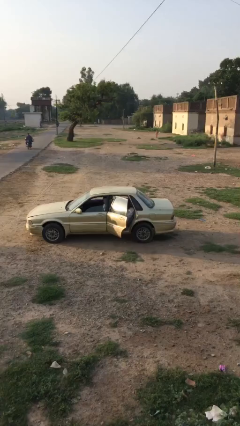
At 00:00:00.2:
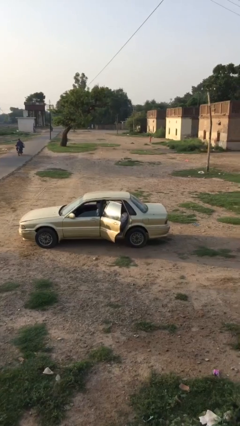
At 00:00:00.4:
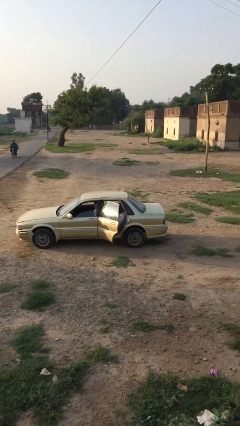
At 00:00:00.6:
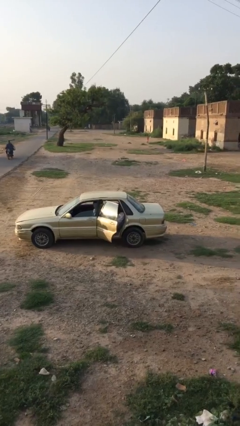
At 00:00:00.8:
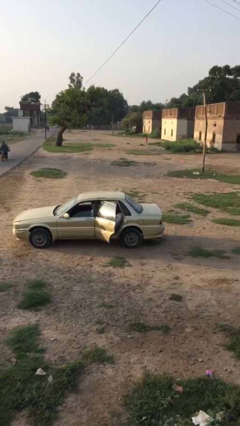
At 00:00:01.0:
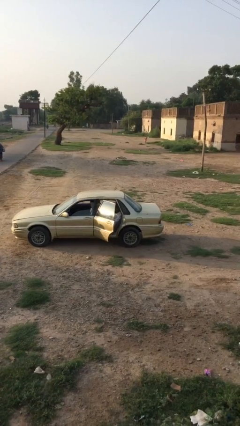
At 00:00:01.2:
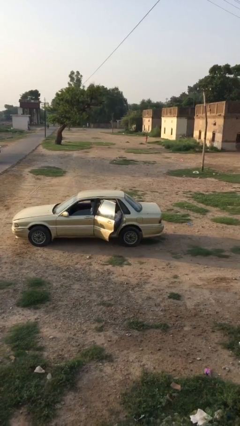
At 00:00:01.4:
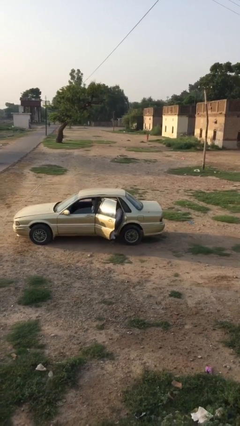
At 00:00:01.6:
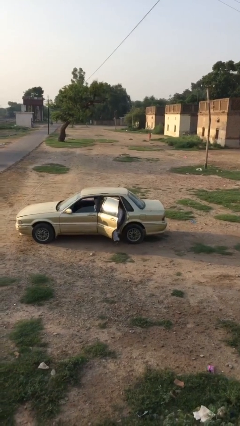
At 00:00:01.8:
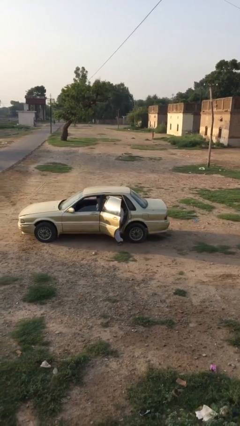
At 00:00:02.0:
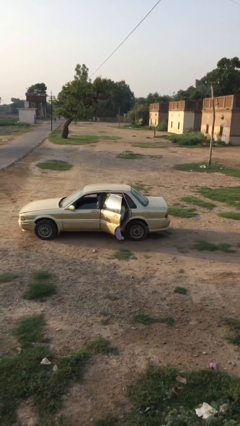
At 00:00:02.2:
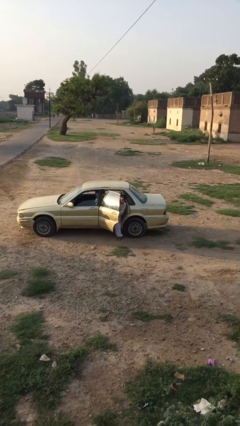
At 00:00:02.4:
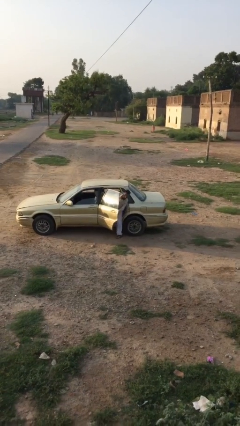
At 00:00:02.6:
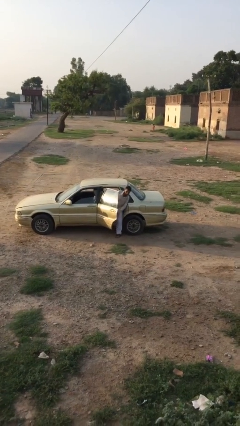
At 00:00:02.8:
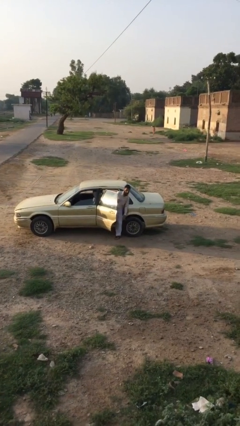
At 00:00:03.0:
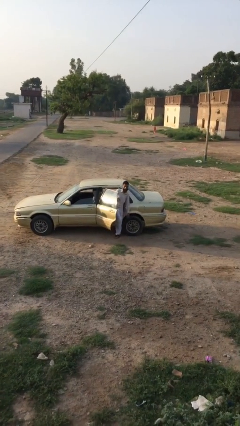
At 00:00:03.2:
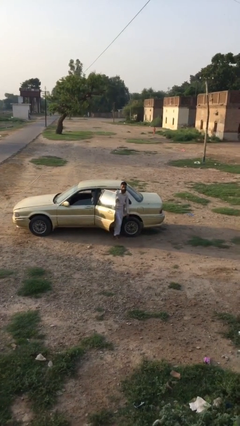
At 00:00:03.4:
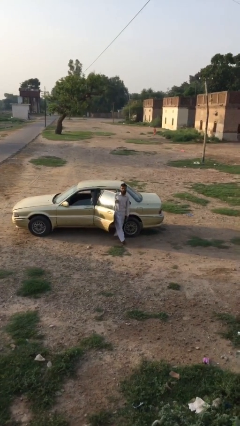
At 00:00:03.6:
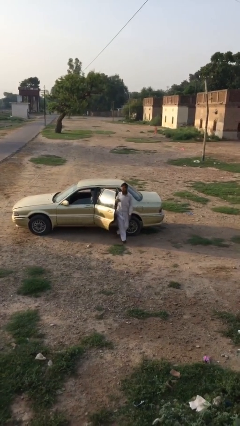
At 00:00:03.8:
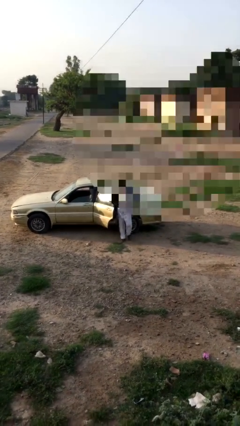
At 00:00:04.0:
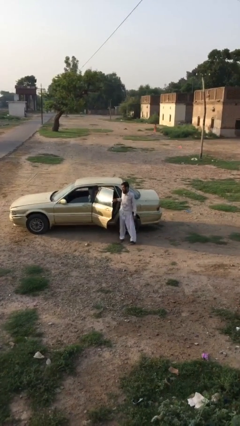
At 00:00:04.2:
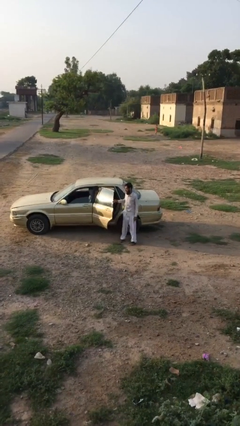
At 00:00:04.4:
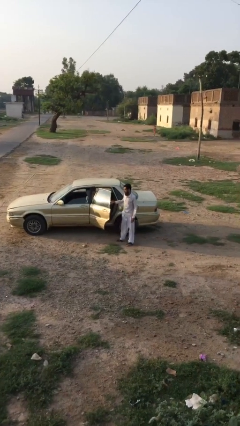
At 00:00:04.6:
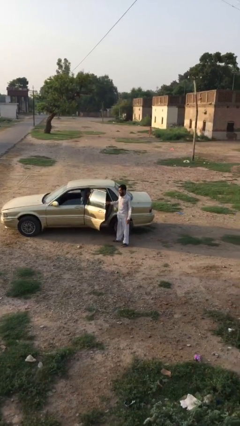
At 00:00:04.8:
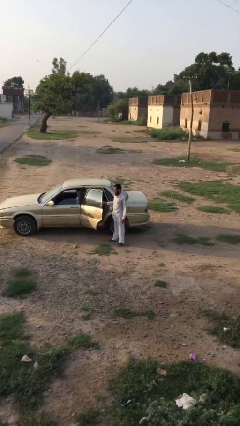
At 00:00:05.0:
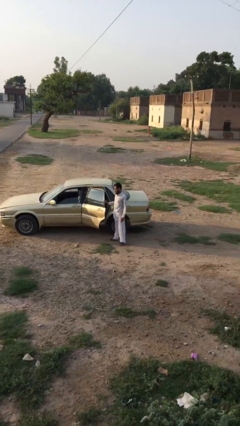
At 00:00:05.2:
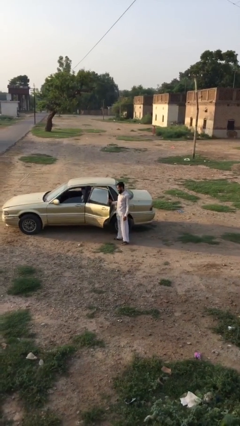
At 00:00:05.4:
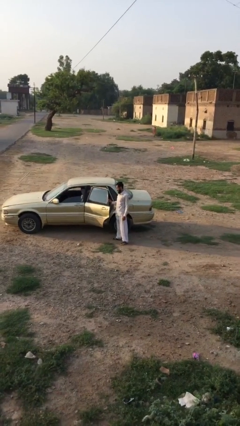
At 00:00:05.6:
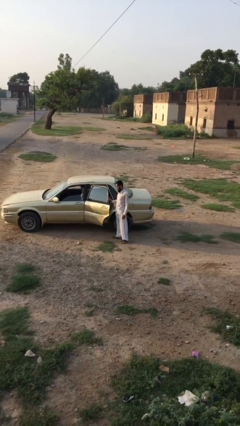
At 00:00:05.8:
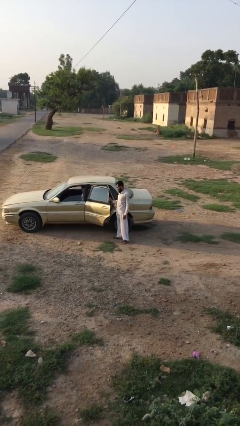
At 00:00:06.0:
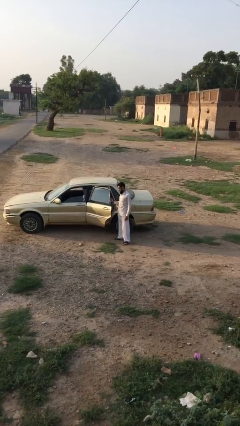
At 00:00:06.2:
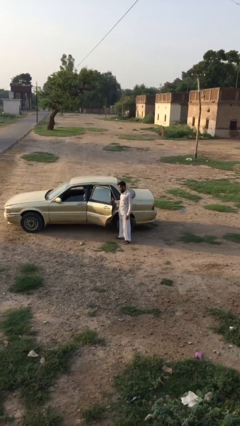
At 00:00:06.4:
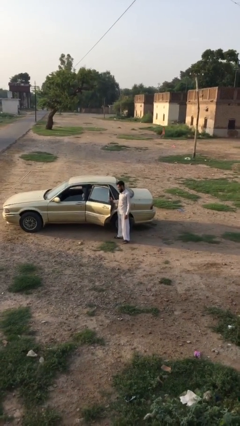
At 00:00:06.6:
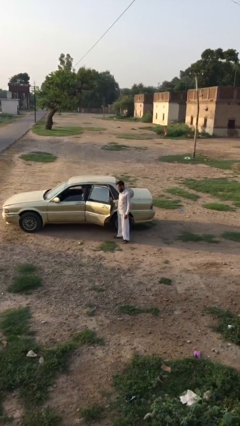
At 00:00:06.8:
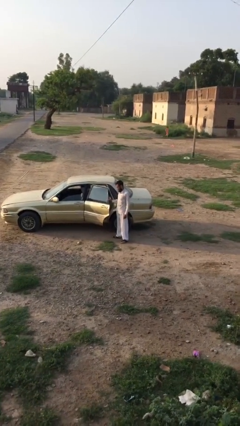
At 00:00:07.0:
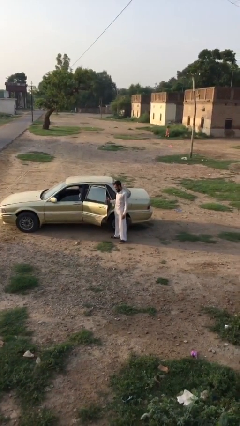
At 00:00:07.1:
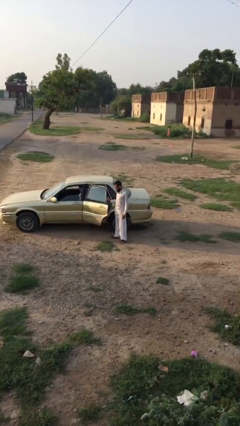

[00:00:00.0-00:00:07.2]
person exits car

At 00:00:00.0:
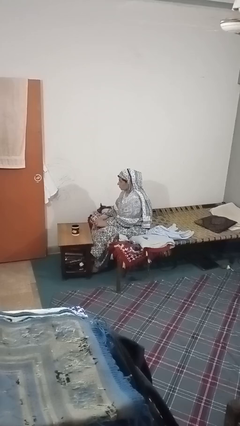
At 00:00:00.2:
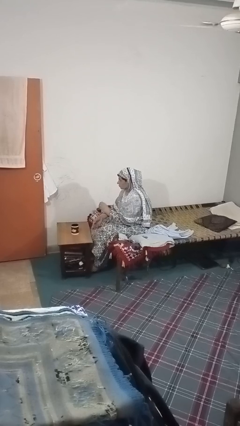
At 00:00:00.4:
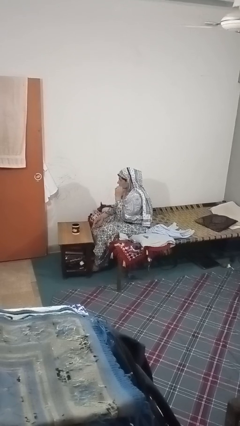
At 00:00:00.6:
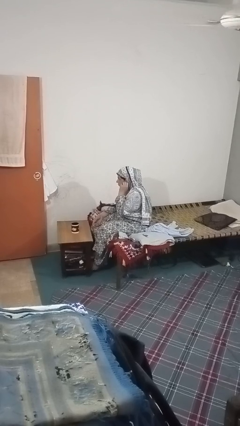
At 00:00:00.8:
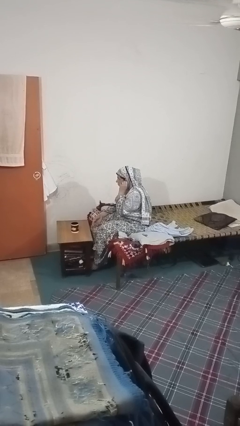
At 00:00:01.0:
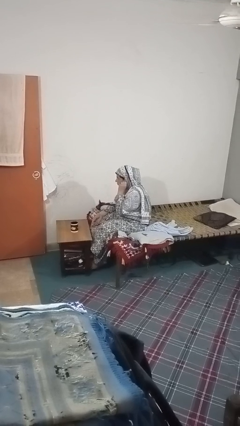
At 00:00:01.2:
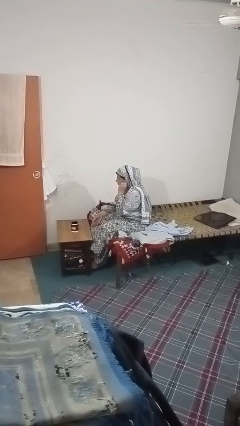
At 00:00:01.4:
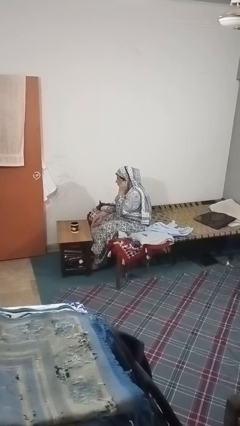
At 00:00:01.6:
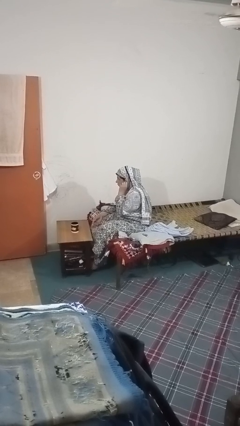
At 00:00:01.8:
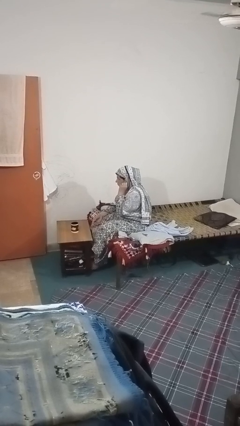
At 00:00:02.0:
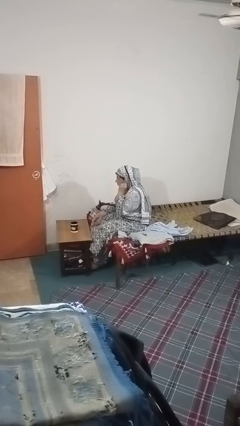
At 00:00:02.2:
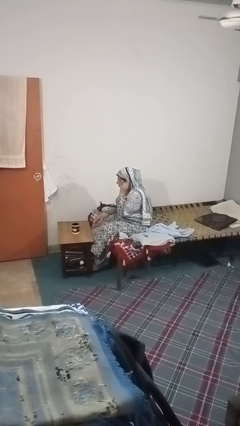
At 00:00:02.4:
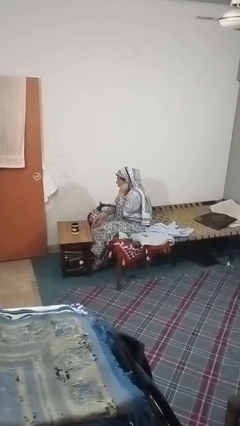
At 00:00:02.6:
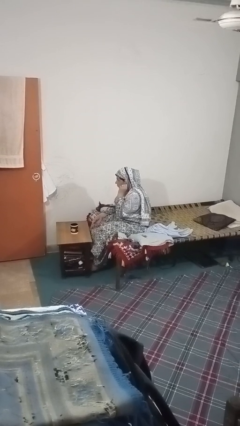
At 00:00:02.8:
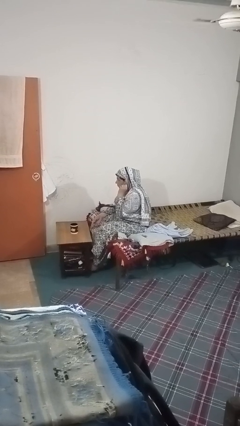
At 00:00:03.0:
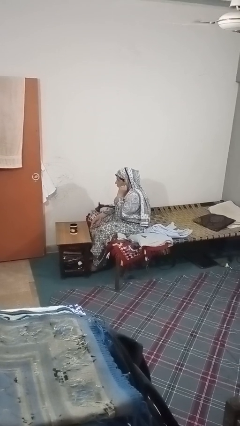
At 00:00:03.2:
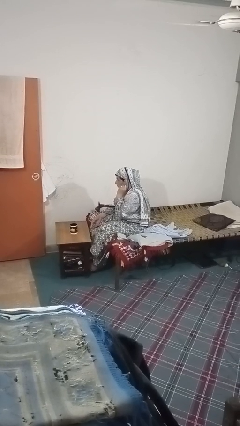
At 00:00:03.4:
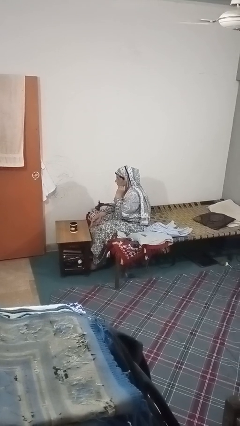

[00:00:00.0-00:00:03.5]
person touches earlobe

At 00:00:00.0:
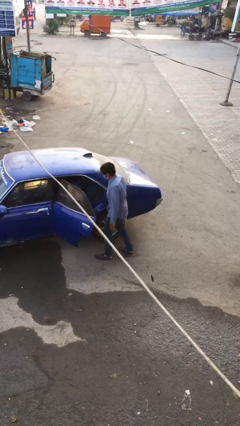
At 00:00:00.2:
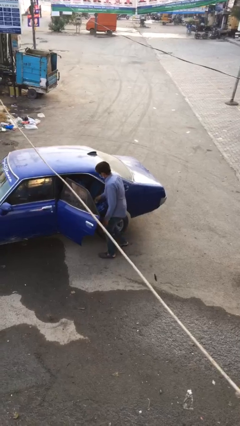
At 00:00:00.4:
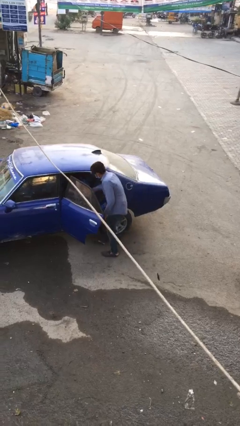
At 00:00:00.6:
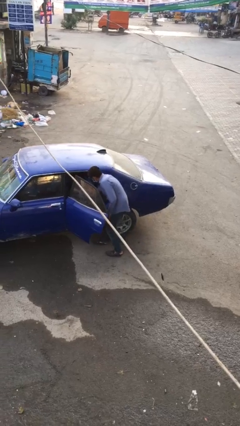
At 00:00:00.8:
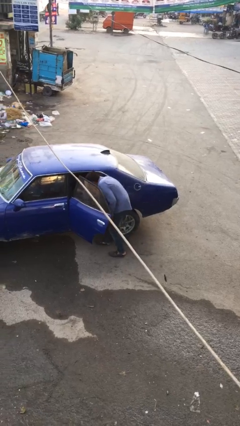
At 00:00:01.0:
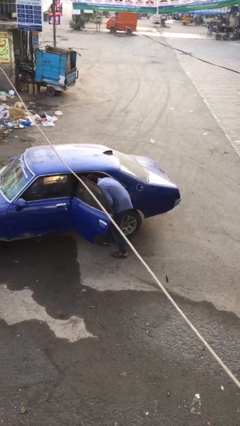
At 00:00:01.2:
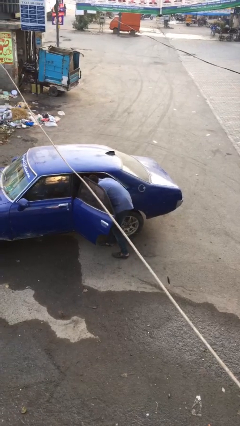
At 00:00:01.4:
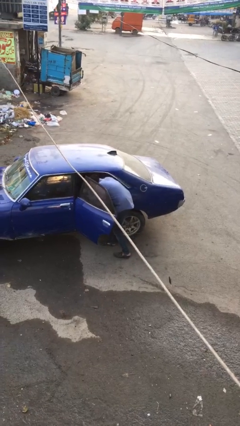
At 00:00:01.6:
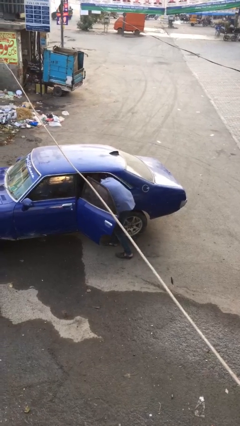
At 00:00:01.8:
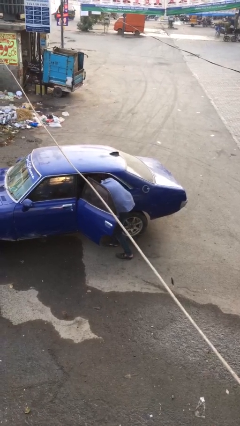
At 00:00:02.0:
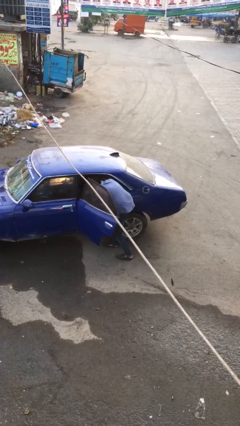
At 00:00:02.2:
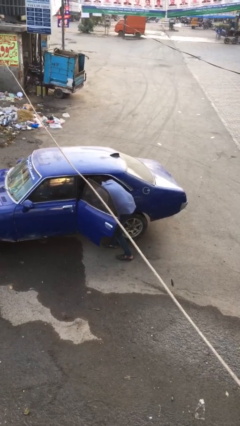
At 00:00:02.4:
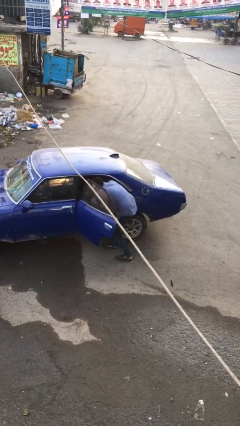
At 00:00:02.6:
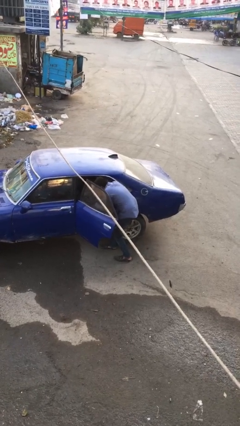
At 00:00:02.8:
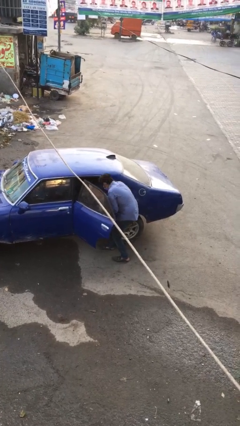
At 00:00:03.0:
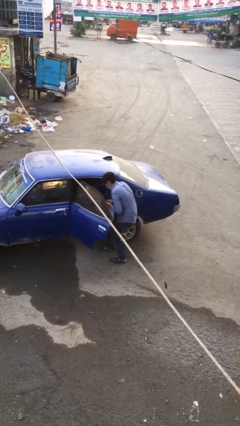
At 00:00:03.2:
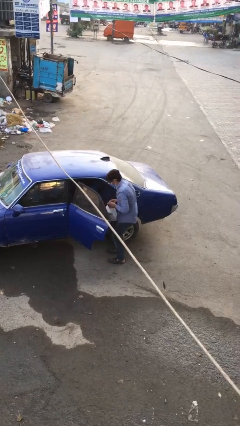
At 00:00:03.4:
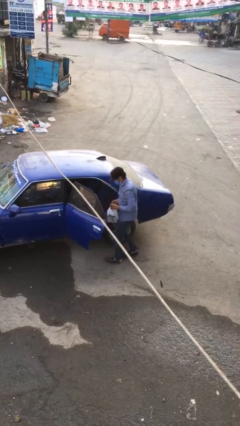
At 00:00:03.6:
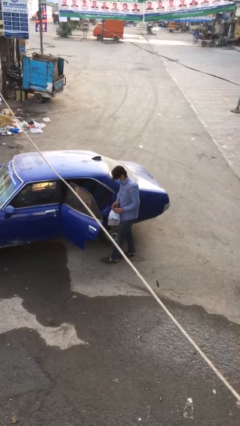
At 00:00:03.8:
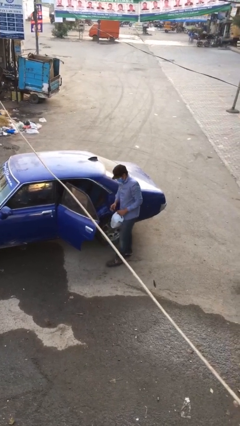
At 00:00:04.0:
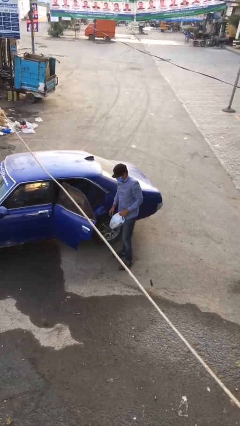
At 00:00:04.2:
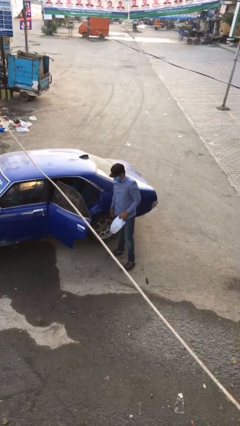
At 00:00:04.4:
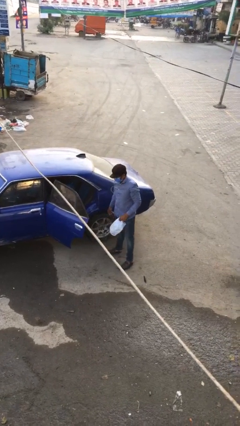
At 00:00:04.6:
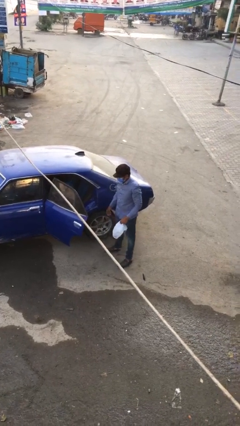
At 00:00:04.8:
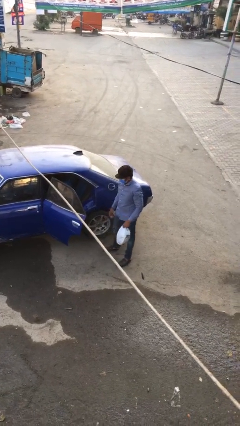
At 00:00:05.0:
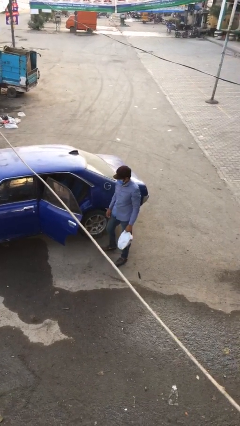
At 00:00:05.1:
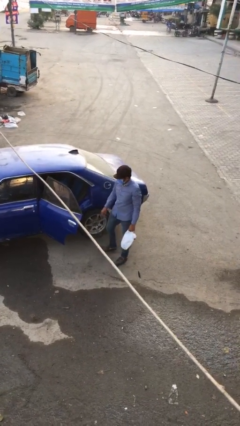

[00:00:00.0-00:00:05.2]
person unloads car

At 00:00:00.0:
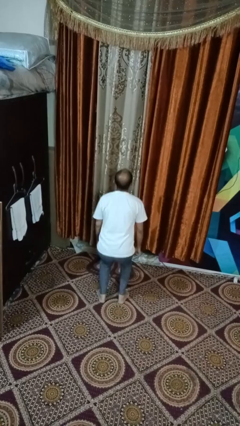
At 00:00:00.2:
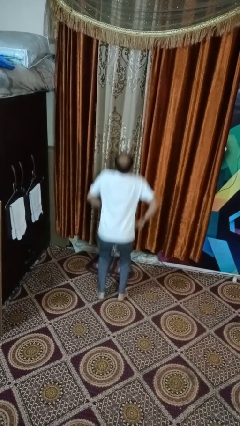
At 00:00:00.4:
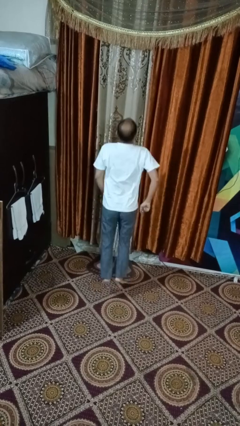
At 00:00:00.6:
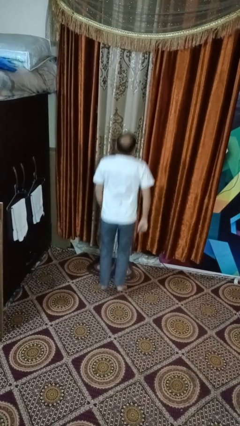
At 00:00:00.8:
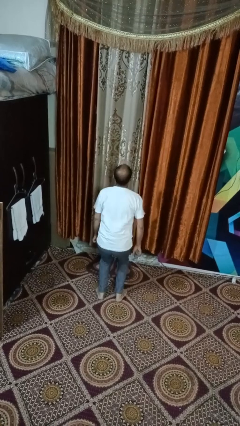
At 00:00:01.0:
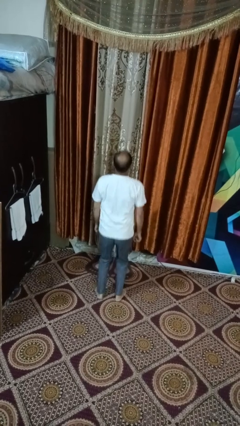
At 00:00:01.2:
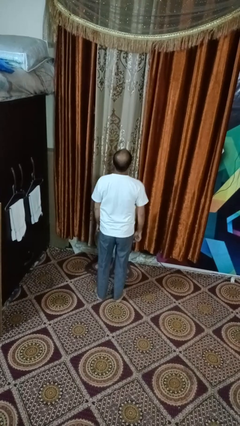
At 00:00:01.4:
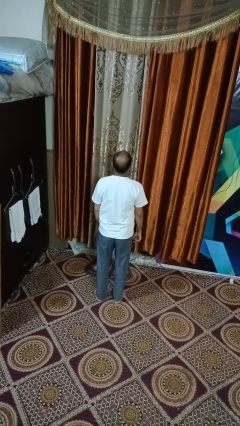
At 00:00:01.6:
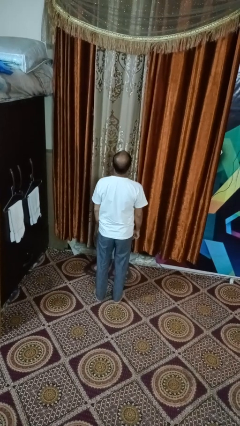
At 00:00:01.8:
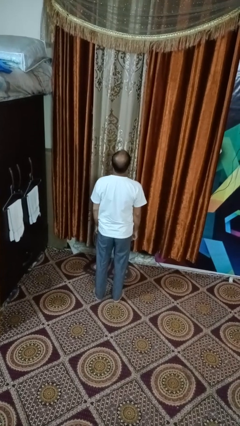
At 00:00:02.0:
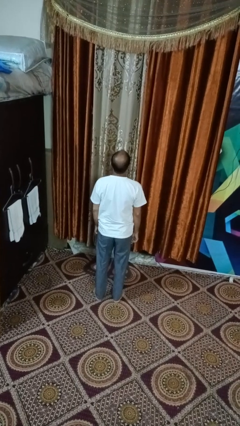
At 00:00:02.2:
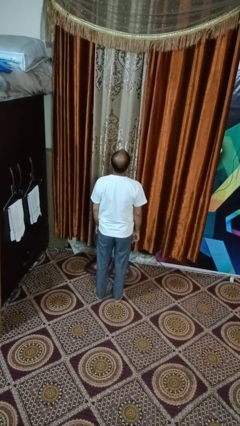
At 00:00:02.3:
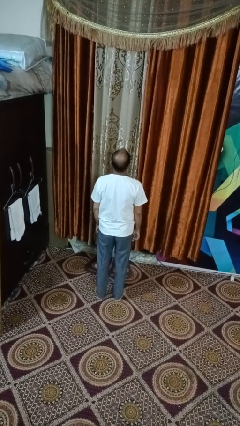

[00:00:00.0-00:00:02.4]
person jumps
